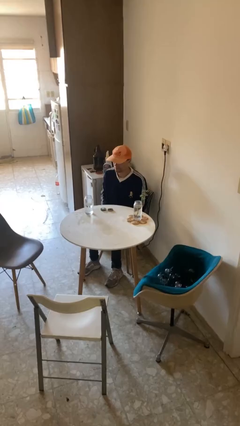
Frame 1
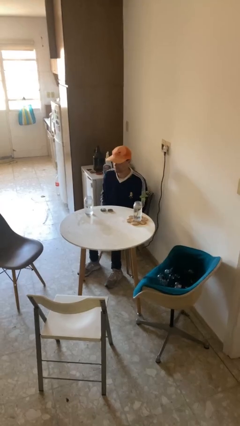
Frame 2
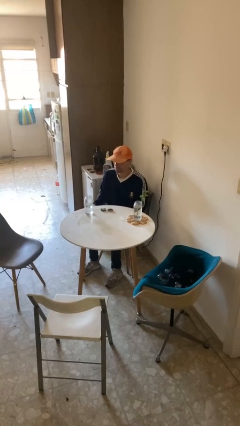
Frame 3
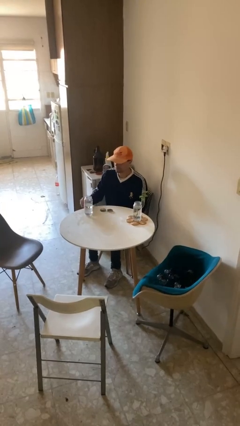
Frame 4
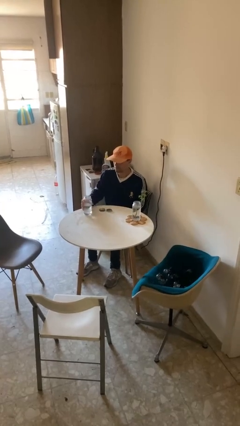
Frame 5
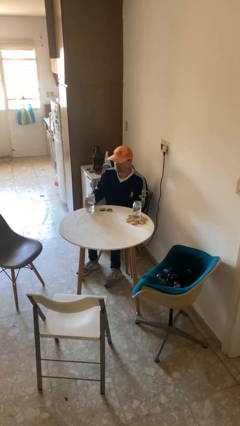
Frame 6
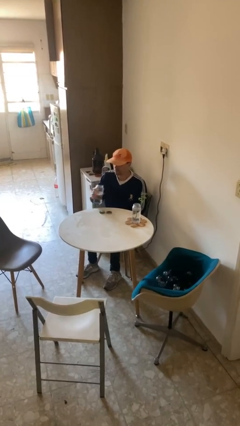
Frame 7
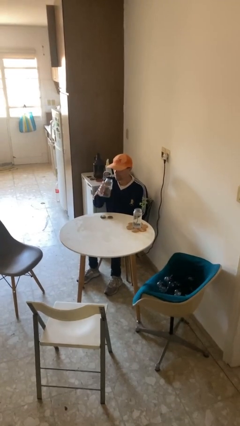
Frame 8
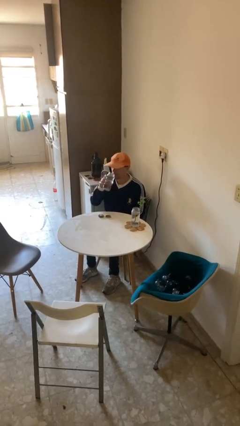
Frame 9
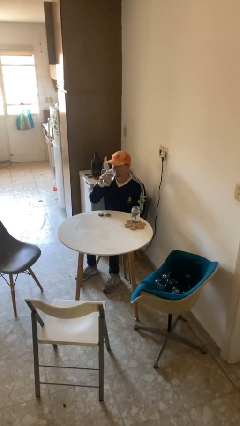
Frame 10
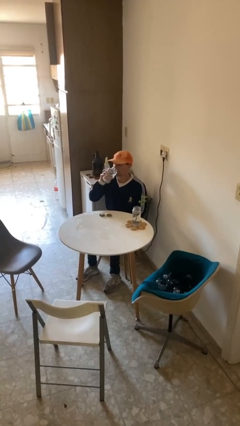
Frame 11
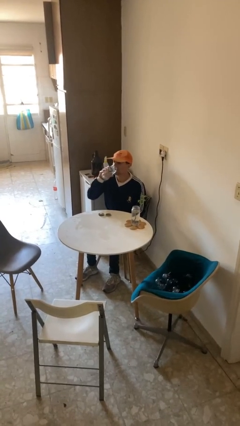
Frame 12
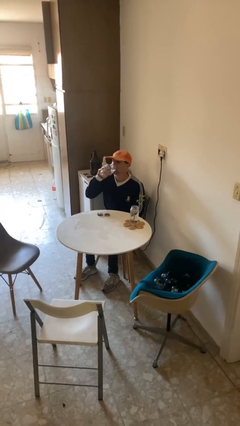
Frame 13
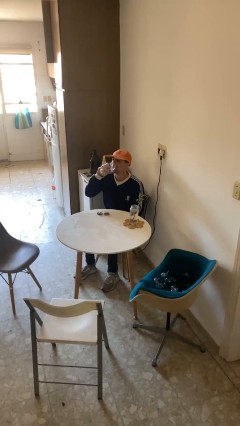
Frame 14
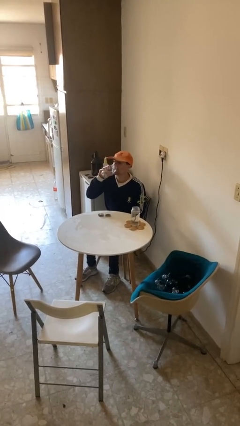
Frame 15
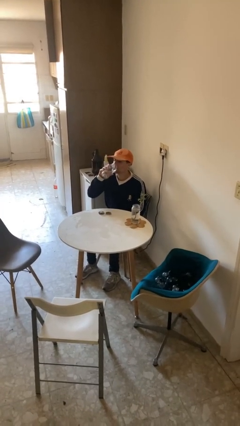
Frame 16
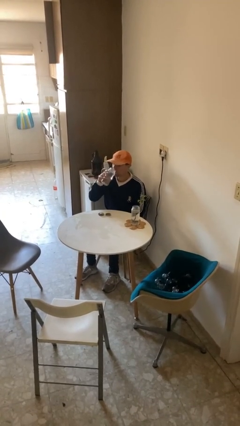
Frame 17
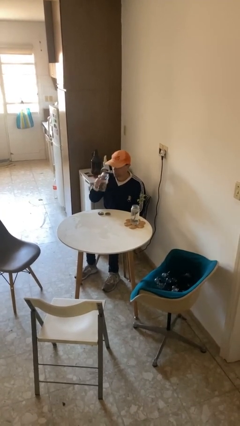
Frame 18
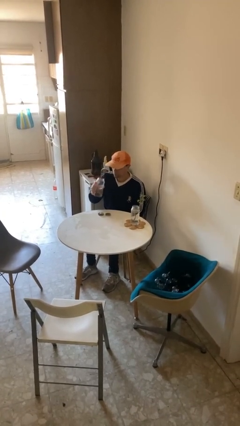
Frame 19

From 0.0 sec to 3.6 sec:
person drinks from cup

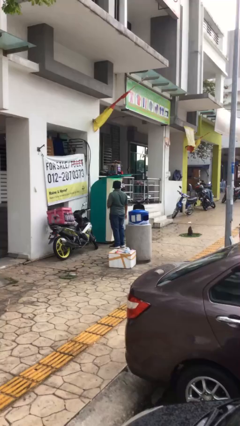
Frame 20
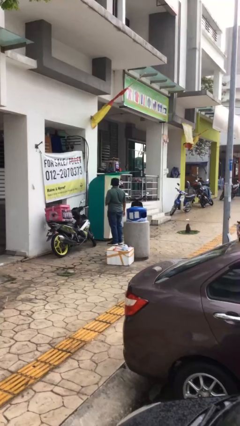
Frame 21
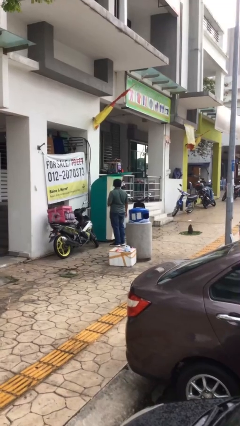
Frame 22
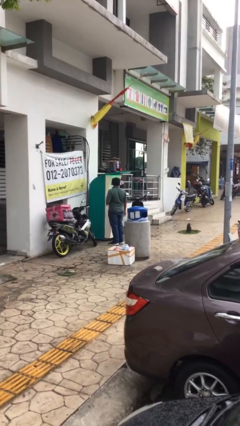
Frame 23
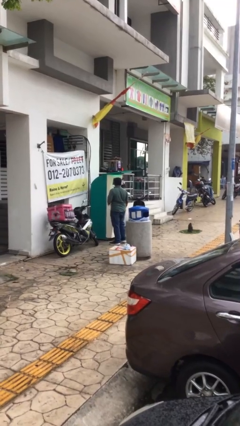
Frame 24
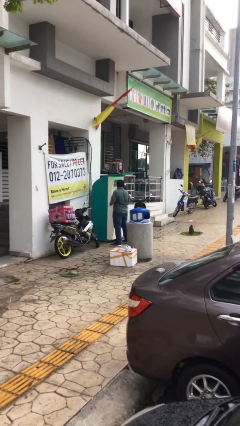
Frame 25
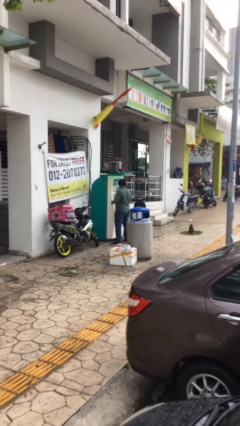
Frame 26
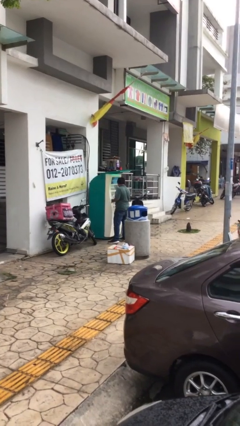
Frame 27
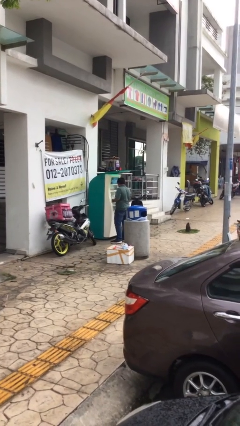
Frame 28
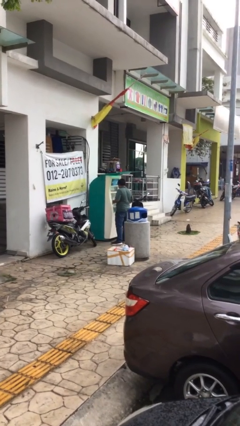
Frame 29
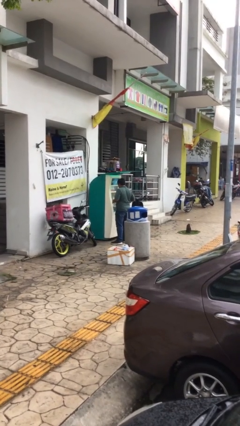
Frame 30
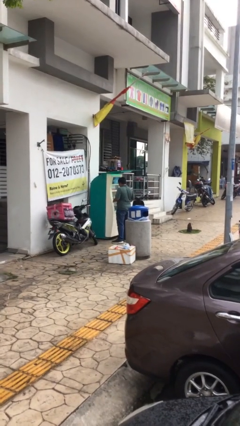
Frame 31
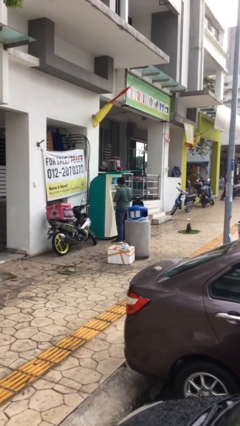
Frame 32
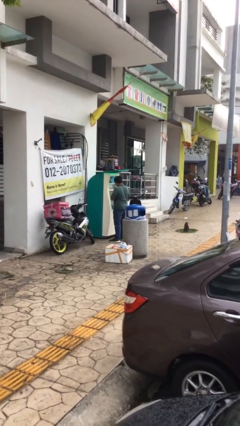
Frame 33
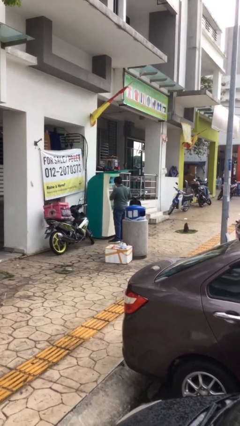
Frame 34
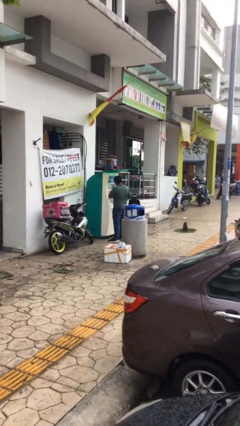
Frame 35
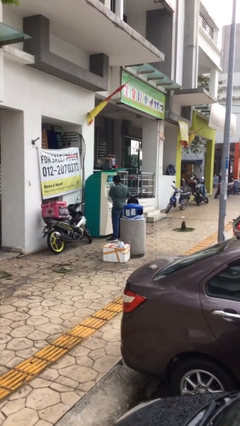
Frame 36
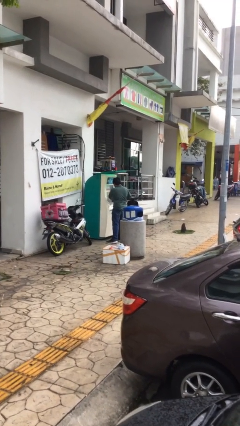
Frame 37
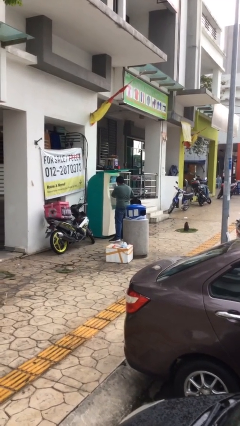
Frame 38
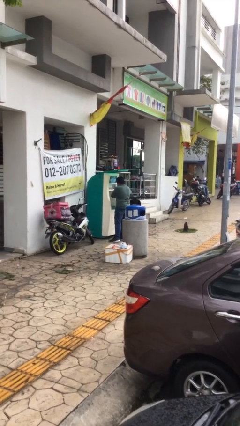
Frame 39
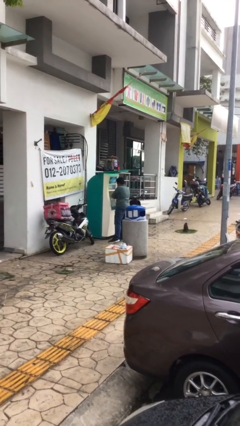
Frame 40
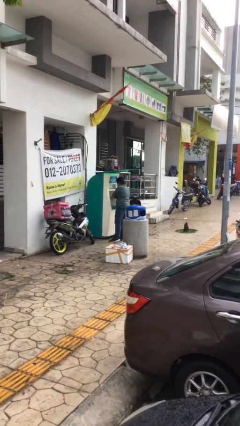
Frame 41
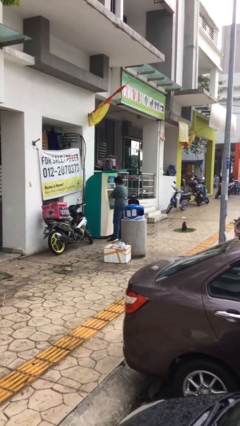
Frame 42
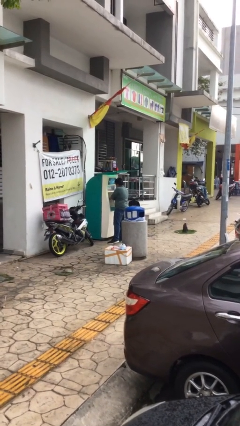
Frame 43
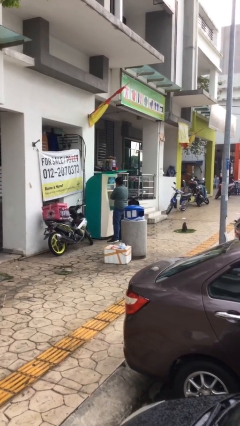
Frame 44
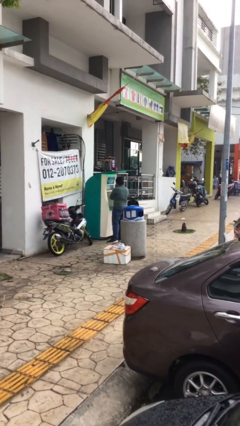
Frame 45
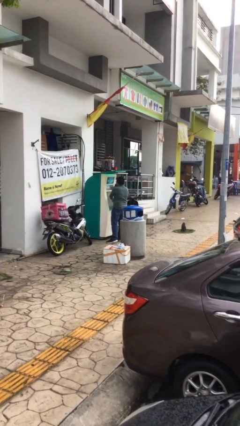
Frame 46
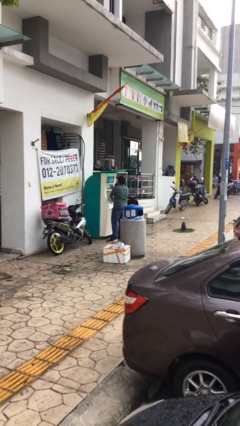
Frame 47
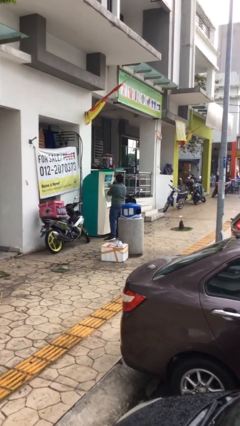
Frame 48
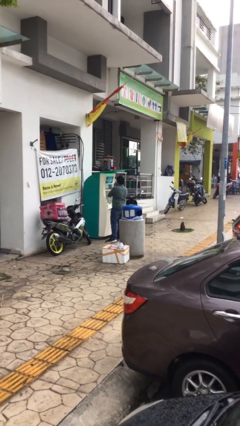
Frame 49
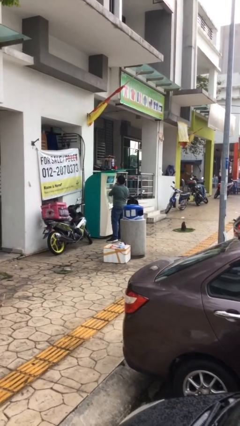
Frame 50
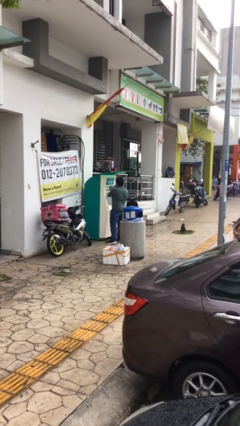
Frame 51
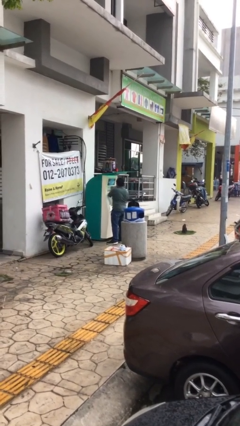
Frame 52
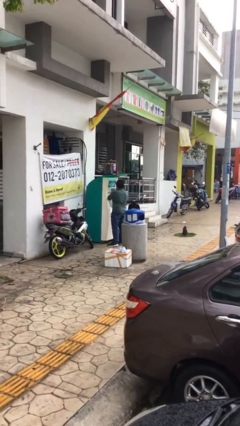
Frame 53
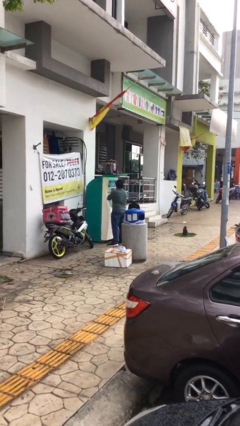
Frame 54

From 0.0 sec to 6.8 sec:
person purchases from machine

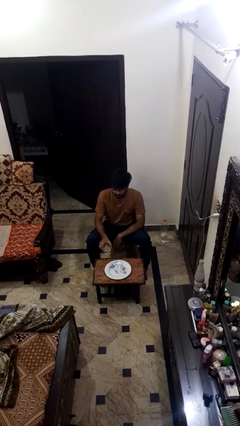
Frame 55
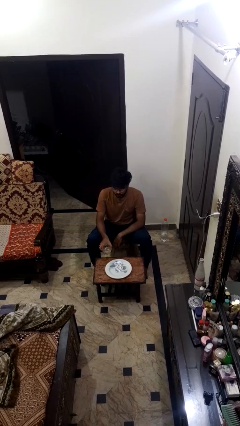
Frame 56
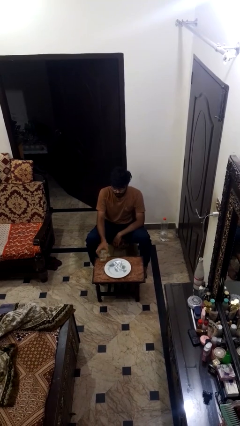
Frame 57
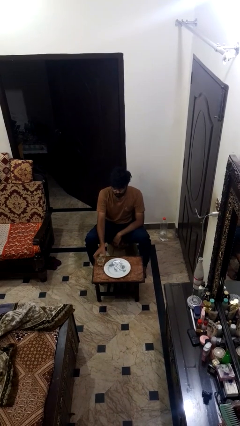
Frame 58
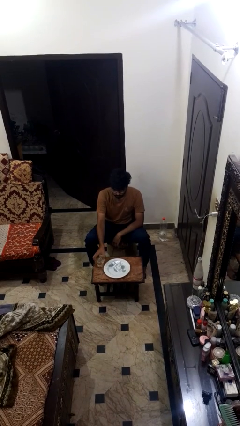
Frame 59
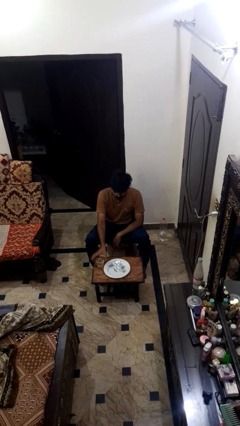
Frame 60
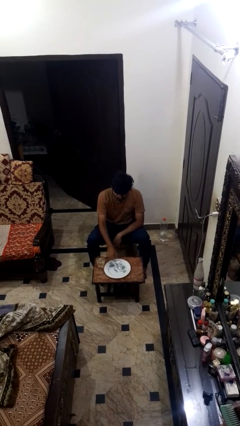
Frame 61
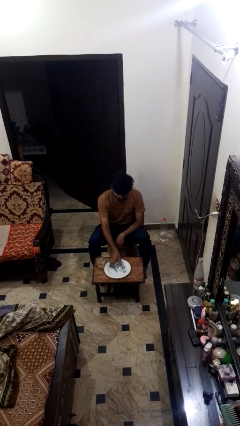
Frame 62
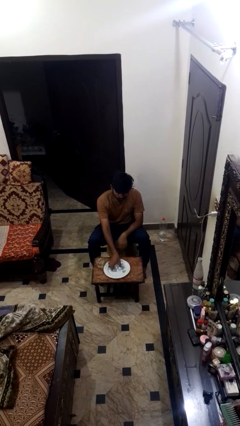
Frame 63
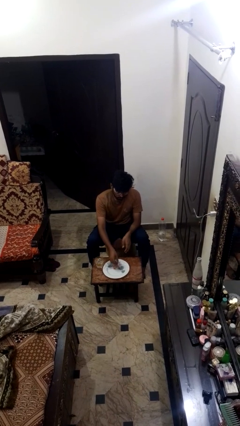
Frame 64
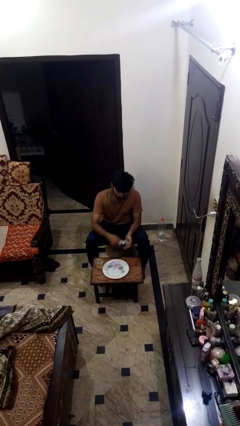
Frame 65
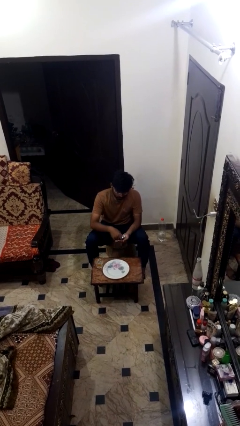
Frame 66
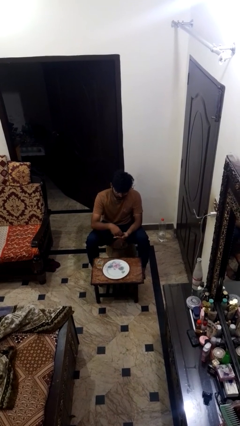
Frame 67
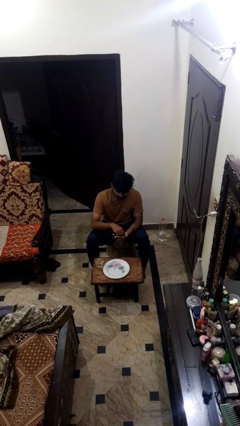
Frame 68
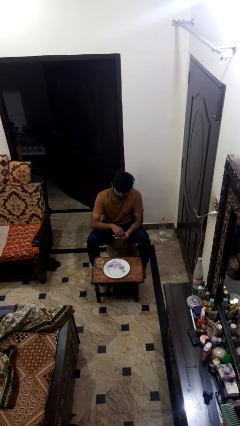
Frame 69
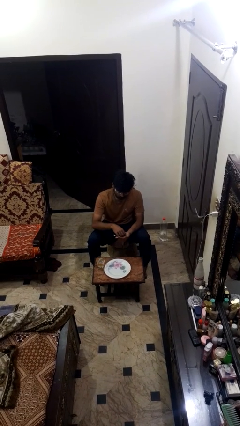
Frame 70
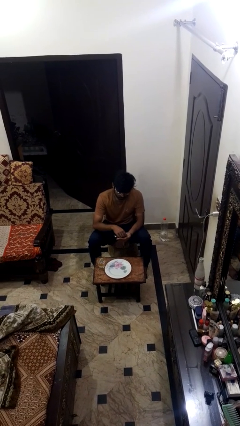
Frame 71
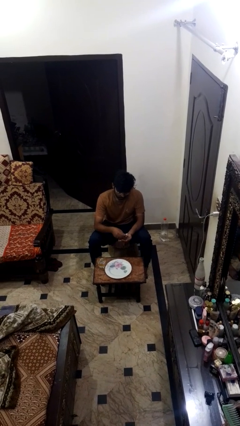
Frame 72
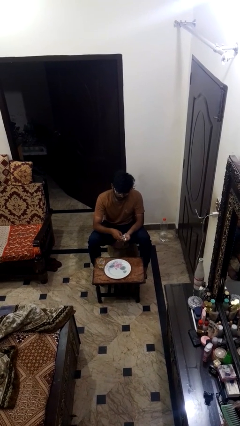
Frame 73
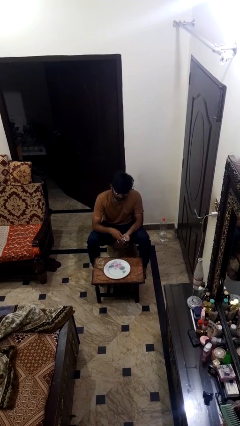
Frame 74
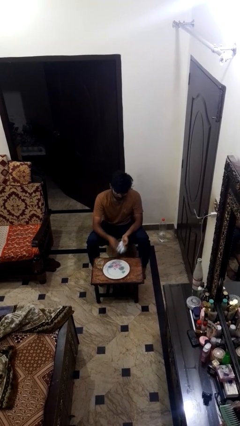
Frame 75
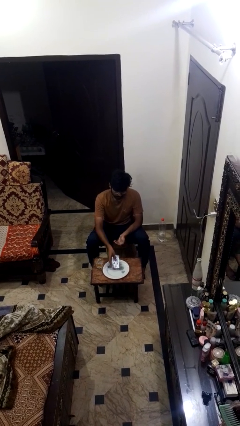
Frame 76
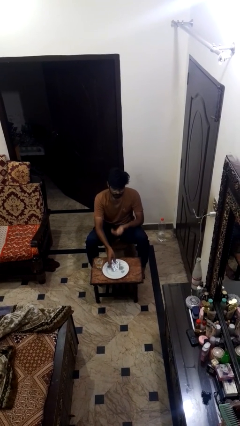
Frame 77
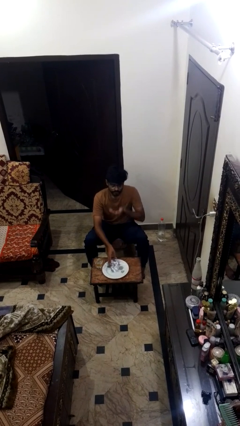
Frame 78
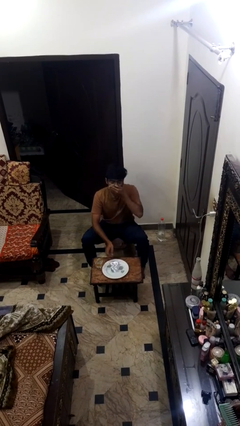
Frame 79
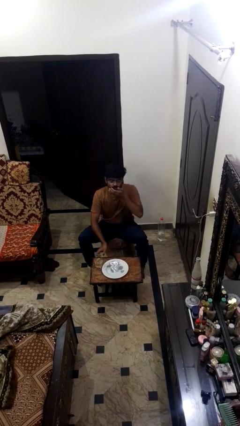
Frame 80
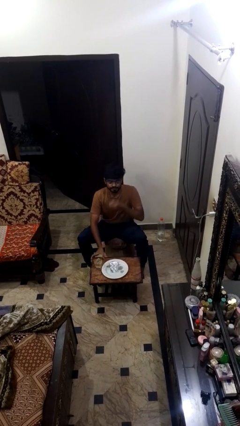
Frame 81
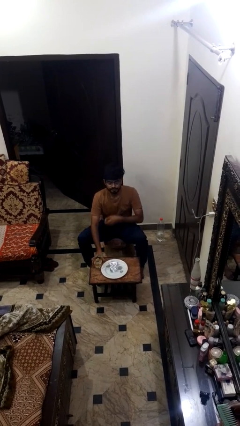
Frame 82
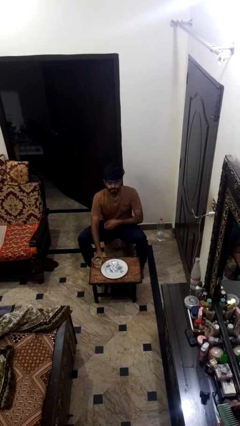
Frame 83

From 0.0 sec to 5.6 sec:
person takes medicine pills

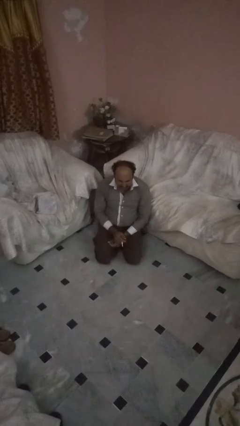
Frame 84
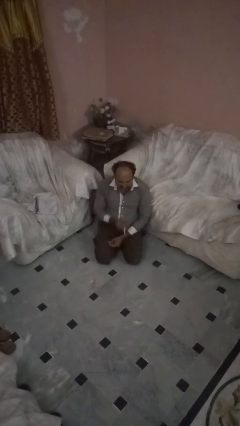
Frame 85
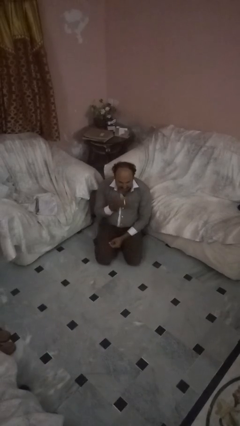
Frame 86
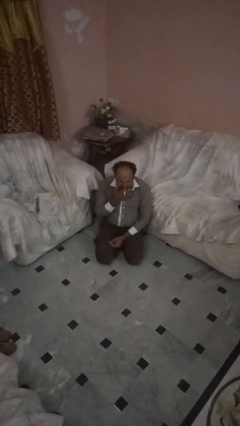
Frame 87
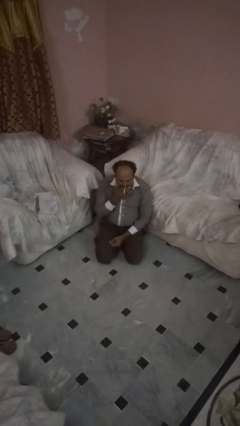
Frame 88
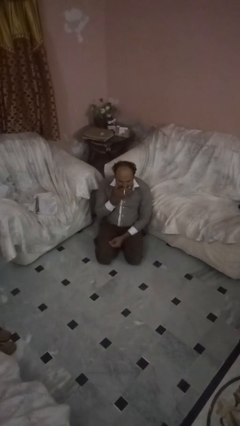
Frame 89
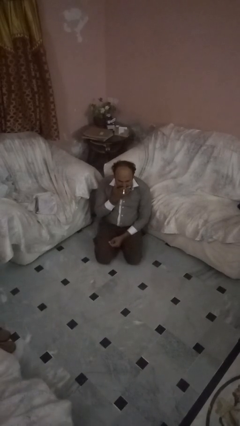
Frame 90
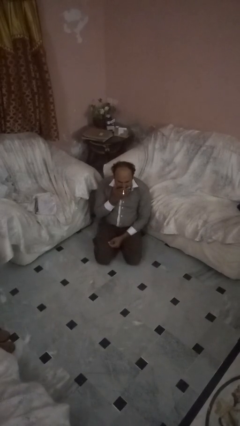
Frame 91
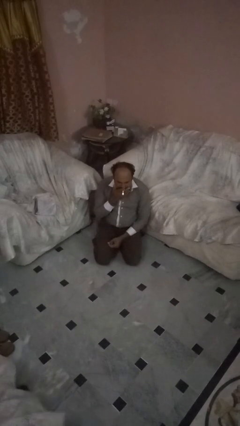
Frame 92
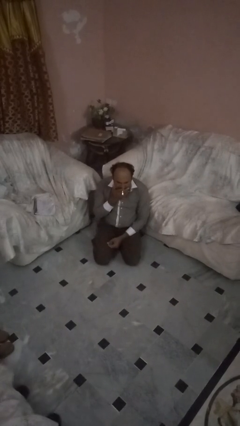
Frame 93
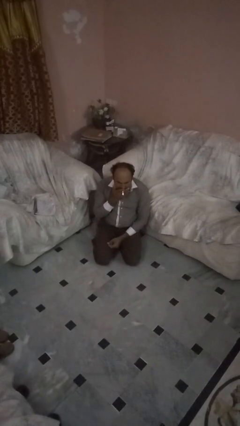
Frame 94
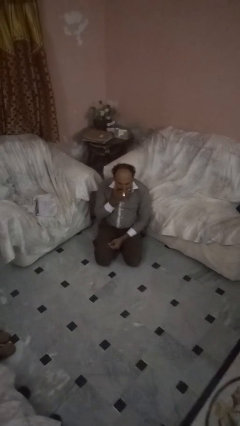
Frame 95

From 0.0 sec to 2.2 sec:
person vapes
